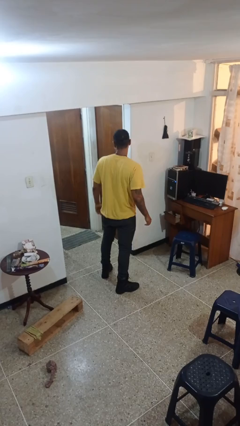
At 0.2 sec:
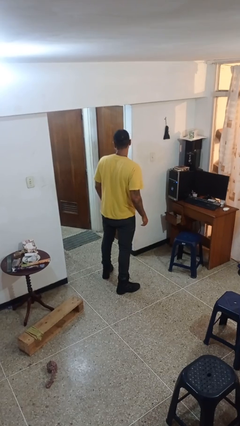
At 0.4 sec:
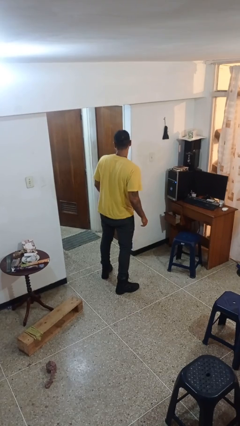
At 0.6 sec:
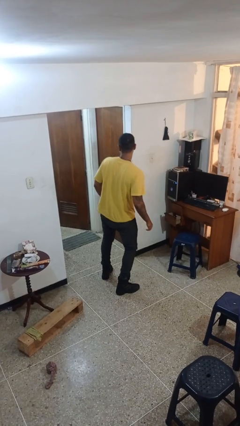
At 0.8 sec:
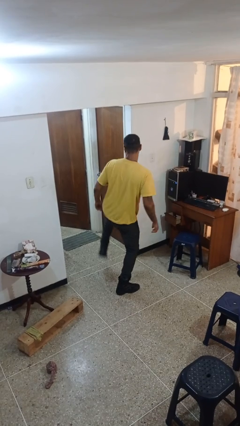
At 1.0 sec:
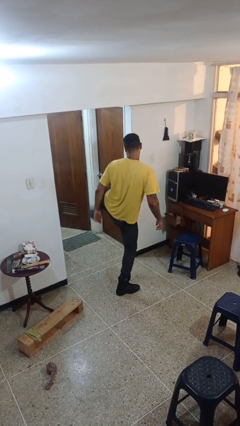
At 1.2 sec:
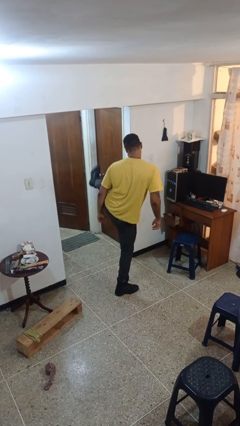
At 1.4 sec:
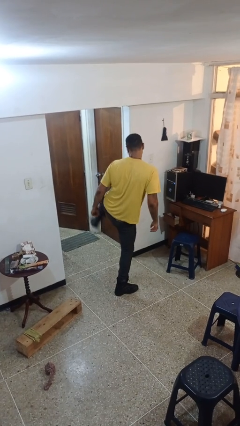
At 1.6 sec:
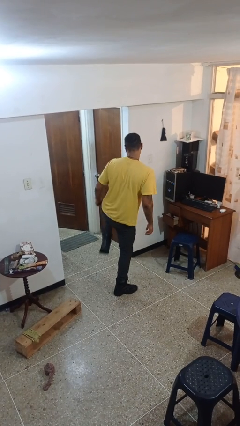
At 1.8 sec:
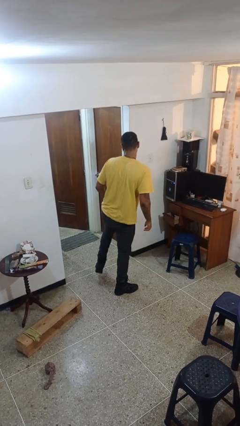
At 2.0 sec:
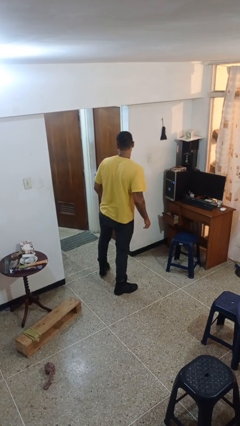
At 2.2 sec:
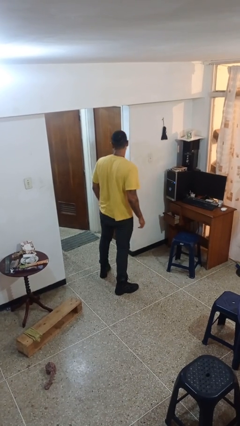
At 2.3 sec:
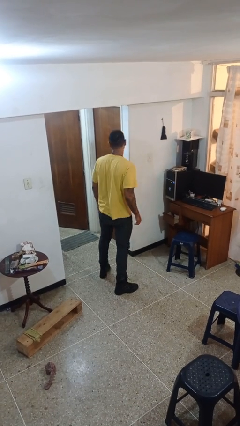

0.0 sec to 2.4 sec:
person karate kicks

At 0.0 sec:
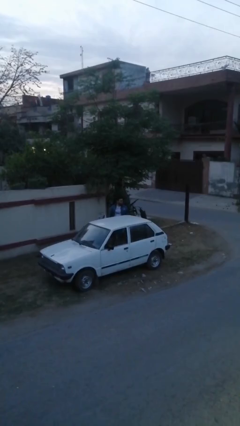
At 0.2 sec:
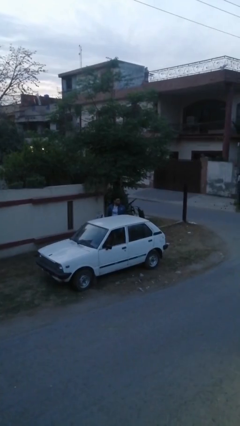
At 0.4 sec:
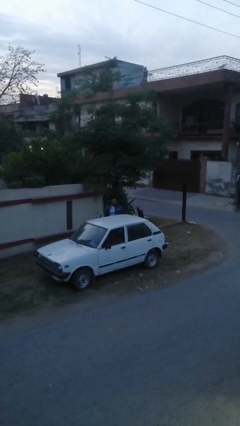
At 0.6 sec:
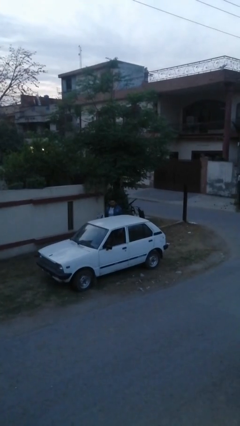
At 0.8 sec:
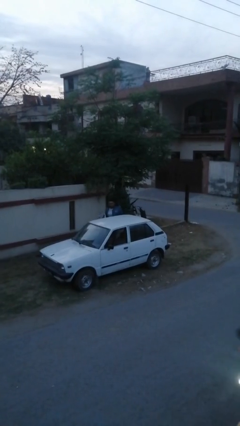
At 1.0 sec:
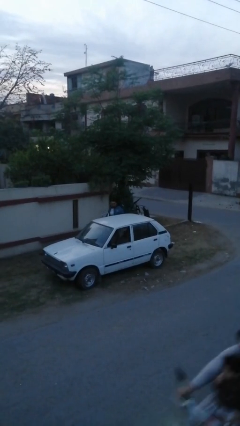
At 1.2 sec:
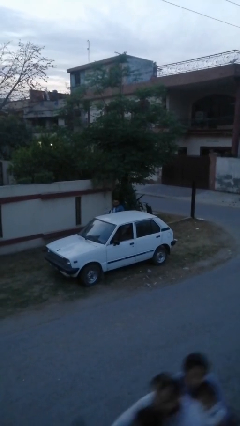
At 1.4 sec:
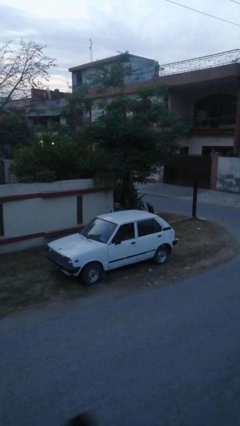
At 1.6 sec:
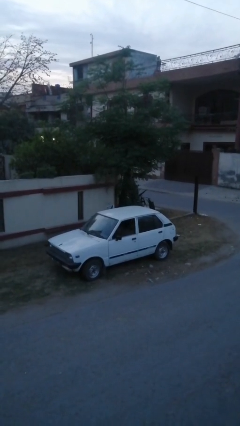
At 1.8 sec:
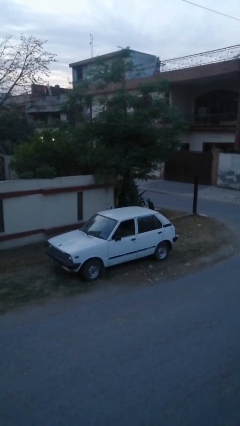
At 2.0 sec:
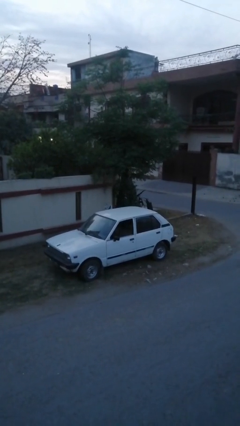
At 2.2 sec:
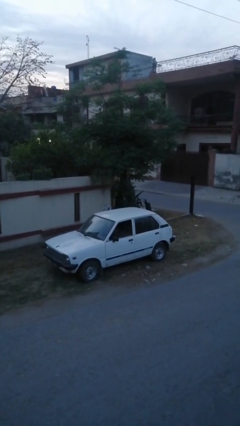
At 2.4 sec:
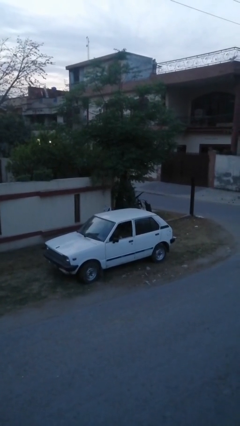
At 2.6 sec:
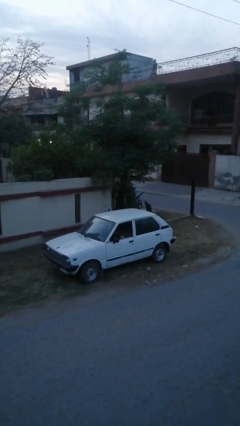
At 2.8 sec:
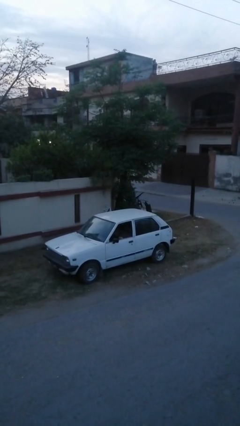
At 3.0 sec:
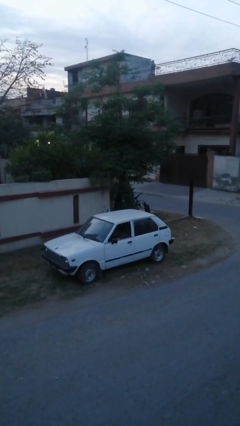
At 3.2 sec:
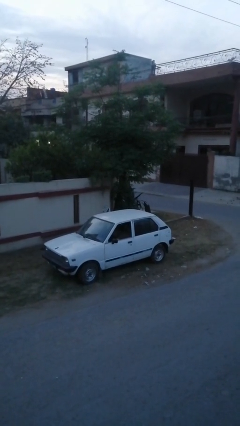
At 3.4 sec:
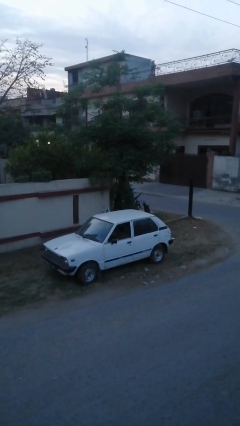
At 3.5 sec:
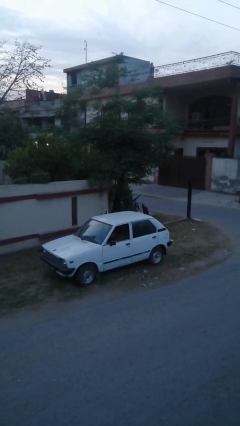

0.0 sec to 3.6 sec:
person enters car

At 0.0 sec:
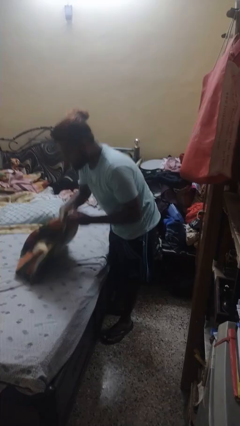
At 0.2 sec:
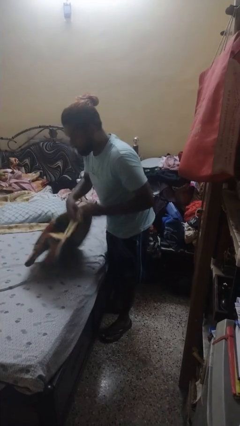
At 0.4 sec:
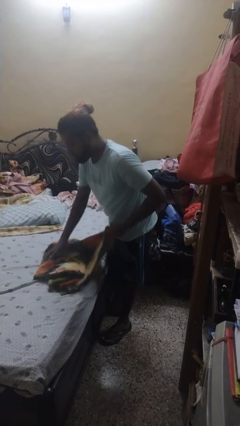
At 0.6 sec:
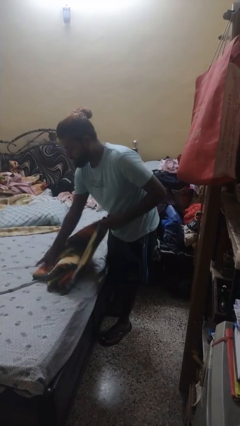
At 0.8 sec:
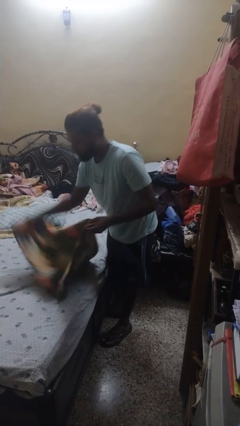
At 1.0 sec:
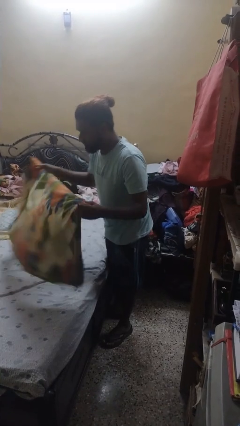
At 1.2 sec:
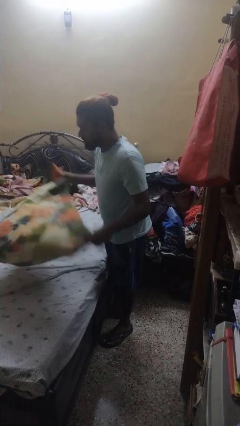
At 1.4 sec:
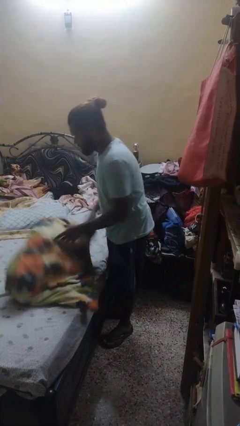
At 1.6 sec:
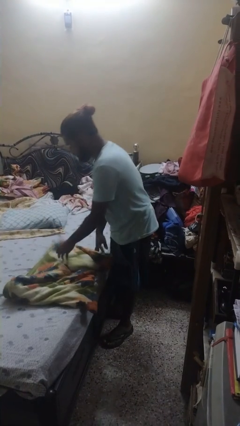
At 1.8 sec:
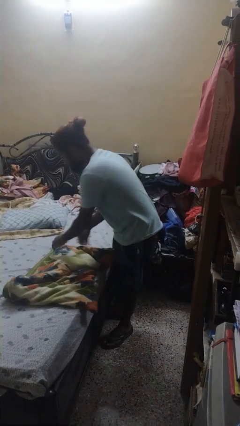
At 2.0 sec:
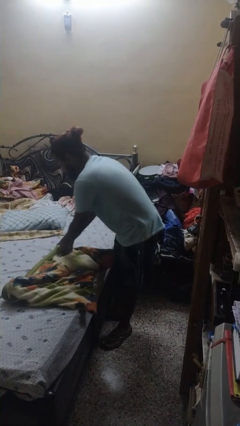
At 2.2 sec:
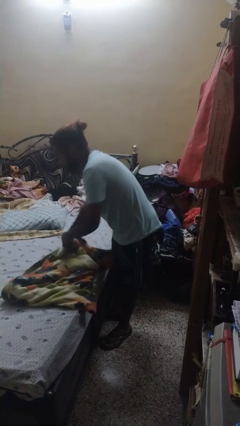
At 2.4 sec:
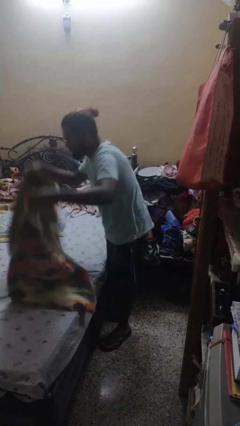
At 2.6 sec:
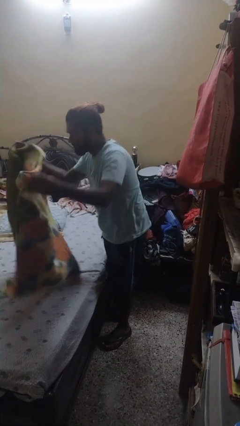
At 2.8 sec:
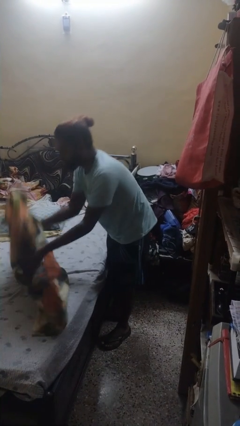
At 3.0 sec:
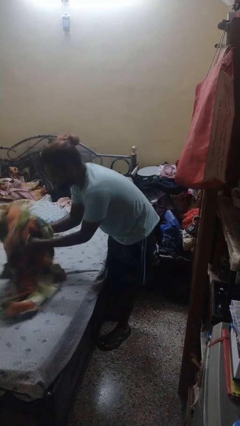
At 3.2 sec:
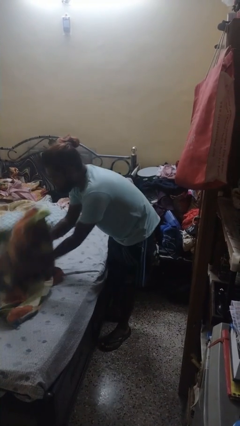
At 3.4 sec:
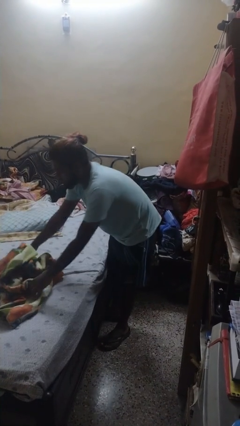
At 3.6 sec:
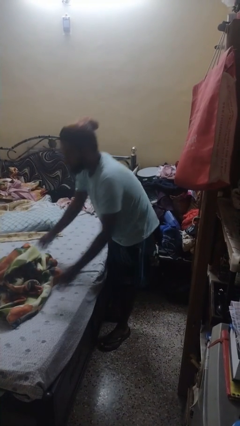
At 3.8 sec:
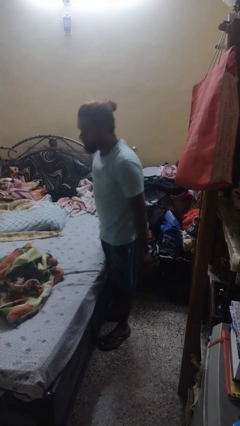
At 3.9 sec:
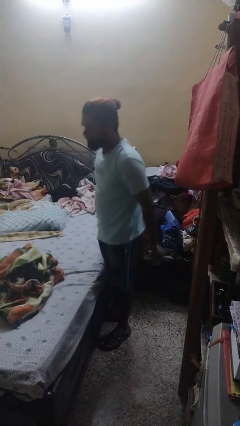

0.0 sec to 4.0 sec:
person unfolds blanket

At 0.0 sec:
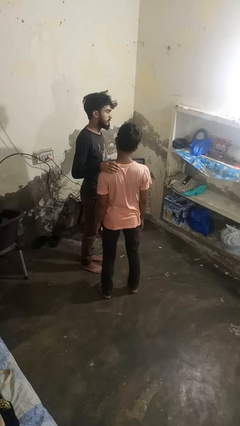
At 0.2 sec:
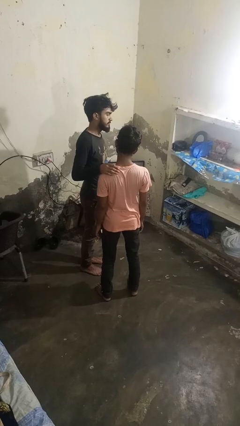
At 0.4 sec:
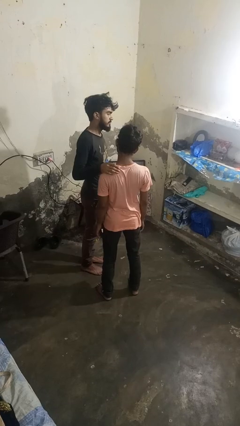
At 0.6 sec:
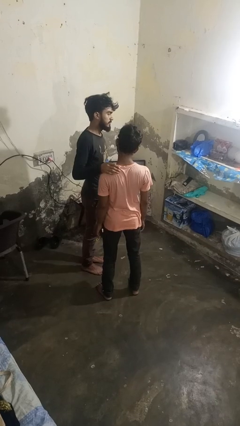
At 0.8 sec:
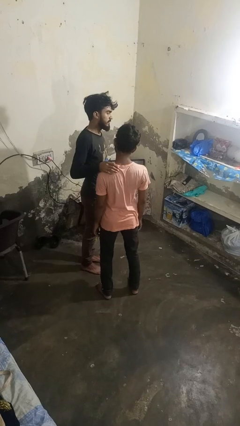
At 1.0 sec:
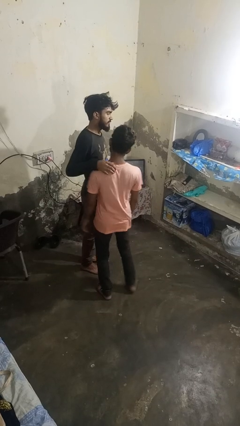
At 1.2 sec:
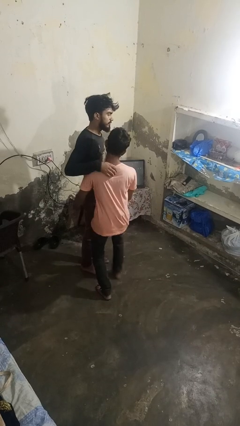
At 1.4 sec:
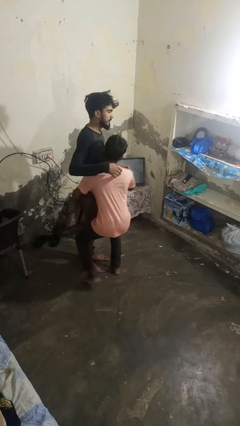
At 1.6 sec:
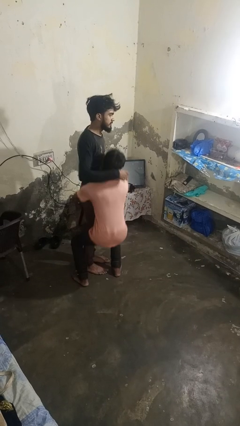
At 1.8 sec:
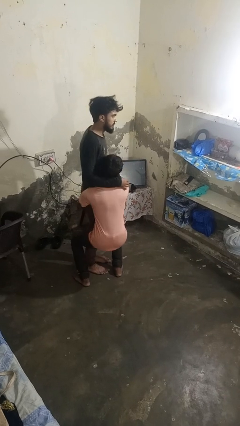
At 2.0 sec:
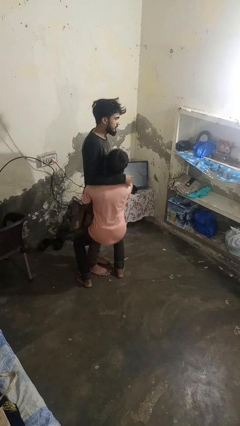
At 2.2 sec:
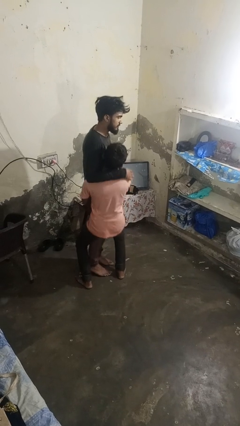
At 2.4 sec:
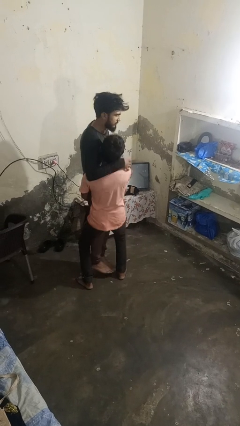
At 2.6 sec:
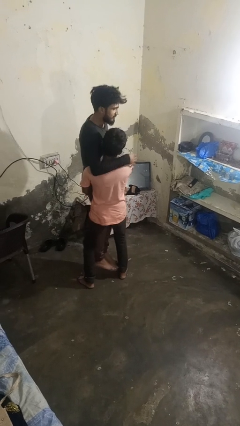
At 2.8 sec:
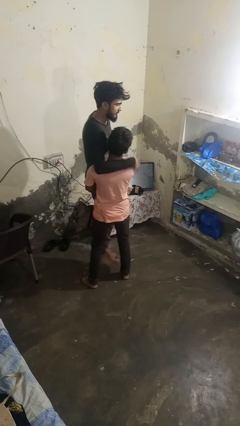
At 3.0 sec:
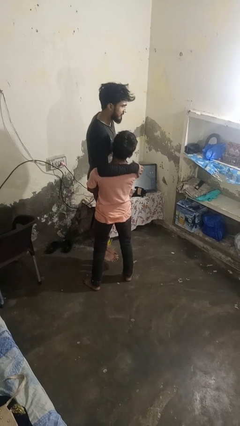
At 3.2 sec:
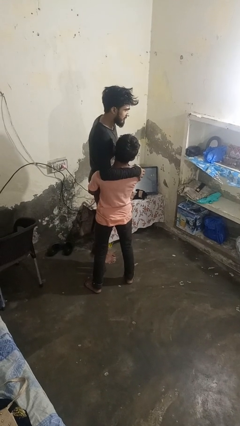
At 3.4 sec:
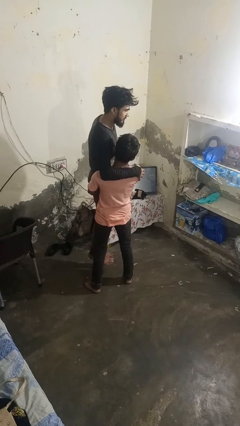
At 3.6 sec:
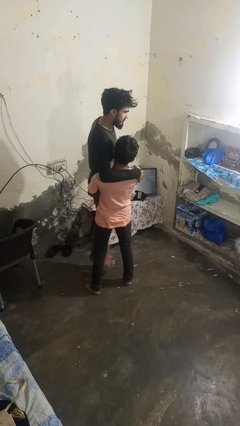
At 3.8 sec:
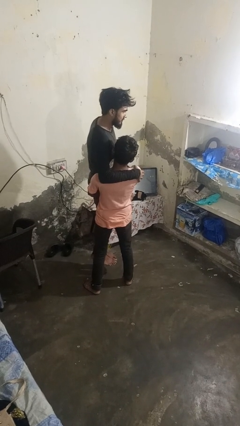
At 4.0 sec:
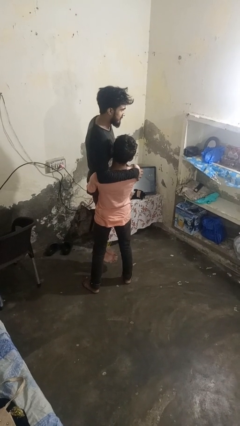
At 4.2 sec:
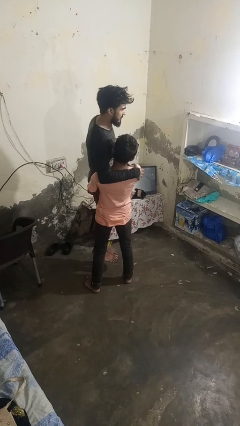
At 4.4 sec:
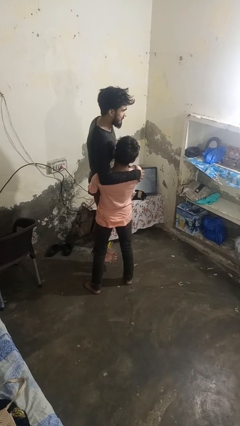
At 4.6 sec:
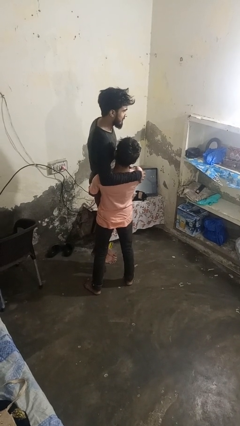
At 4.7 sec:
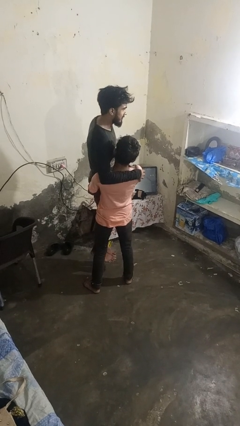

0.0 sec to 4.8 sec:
person picks up person

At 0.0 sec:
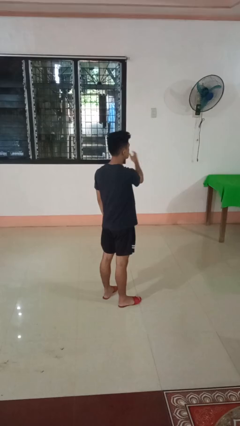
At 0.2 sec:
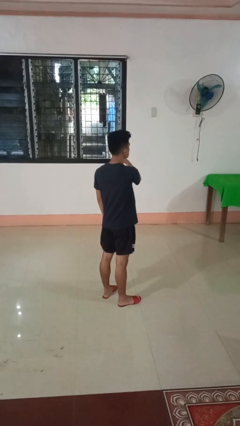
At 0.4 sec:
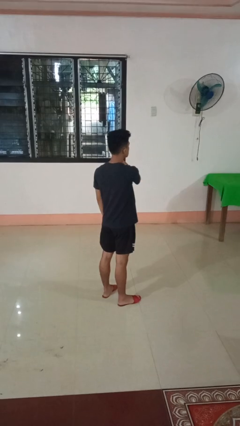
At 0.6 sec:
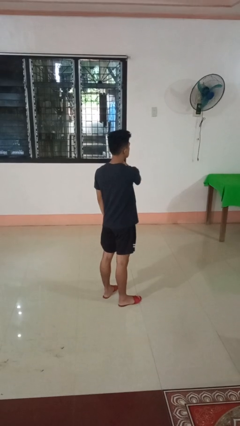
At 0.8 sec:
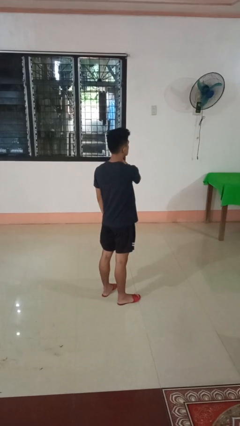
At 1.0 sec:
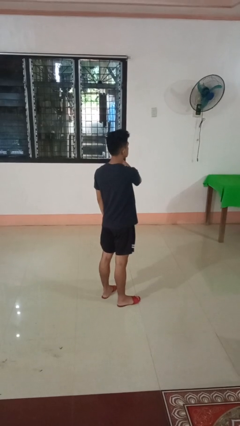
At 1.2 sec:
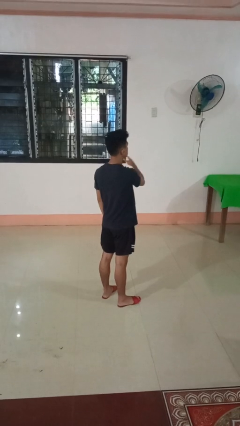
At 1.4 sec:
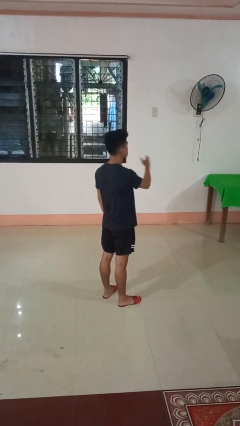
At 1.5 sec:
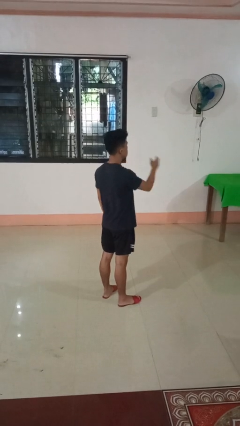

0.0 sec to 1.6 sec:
person gestures swipe left

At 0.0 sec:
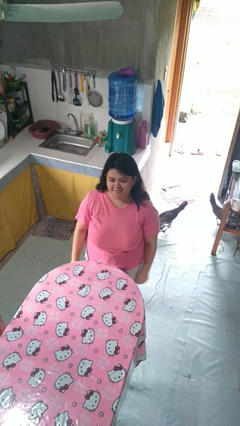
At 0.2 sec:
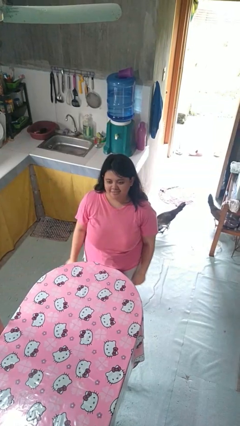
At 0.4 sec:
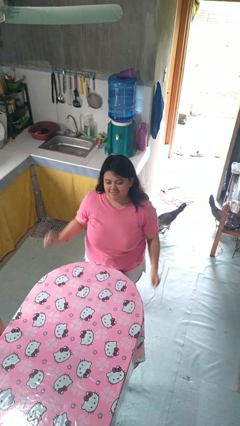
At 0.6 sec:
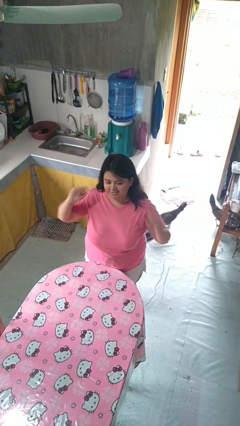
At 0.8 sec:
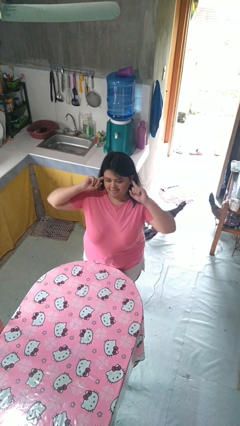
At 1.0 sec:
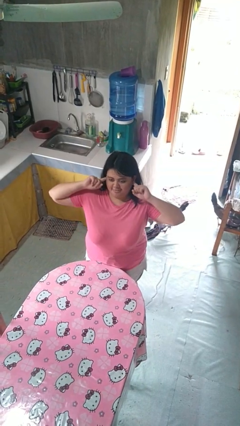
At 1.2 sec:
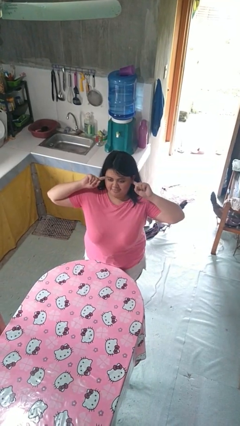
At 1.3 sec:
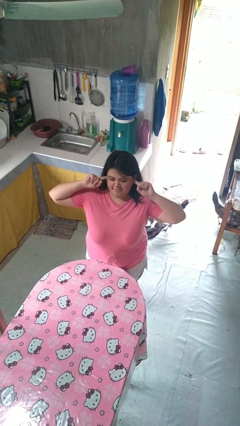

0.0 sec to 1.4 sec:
person puts fingers in ear
